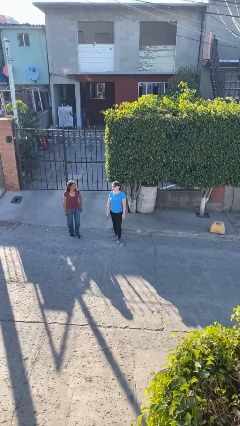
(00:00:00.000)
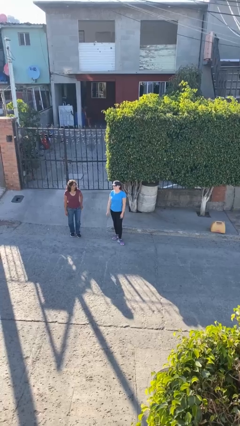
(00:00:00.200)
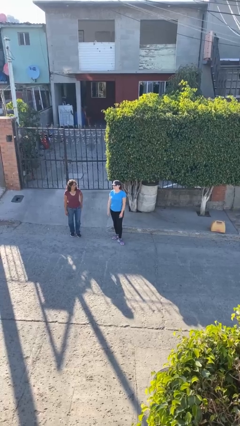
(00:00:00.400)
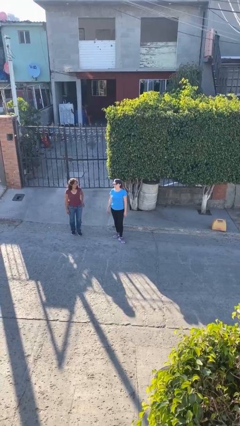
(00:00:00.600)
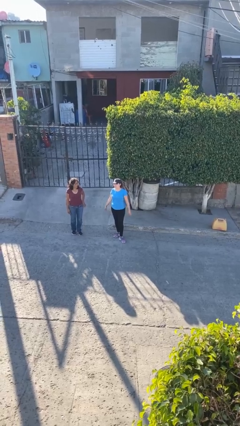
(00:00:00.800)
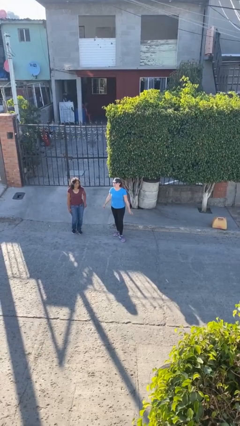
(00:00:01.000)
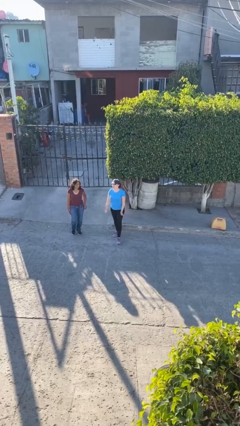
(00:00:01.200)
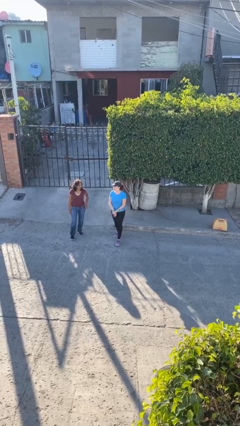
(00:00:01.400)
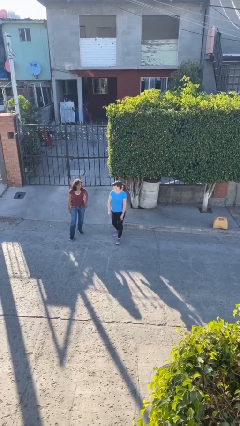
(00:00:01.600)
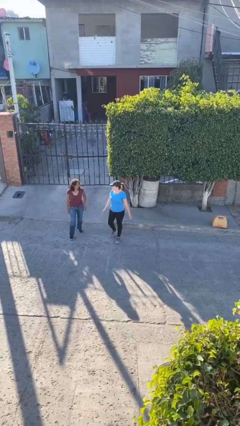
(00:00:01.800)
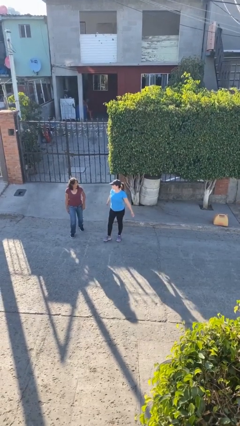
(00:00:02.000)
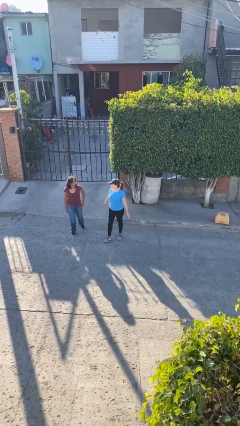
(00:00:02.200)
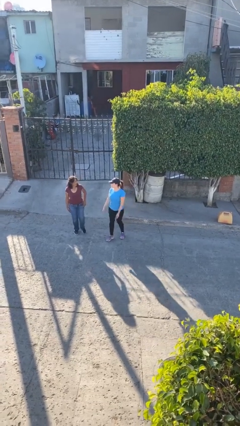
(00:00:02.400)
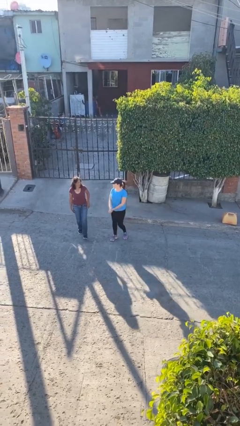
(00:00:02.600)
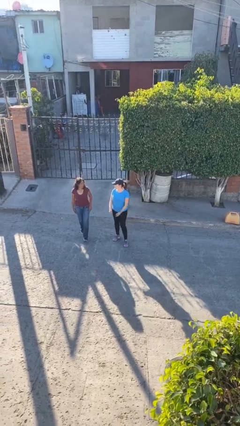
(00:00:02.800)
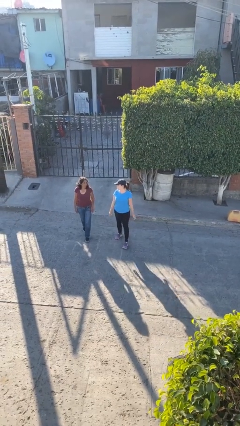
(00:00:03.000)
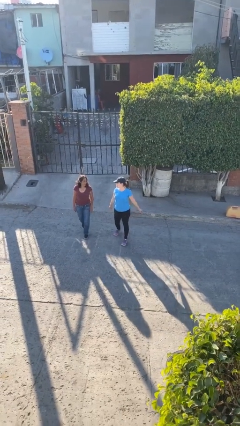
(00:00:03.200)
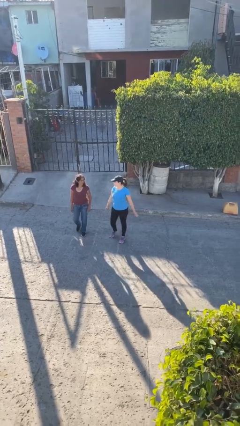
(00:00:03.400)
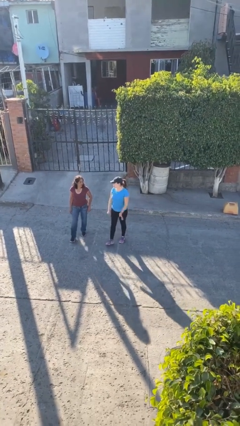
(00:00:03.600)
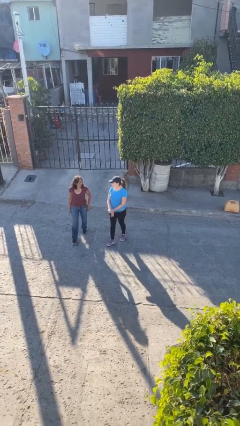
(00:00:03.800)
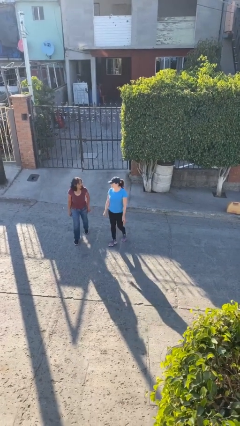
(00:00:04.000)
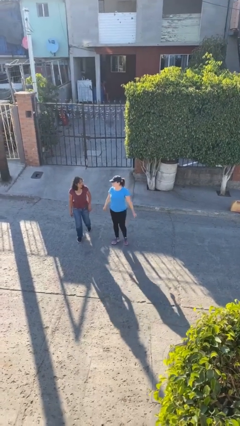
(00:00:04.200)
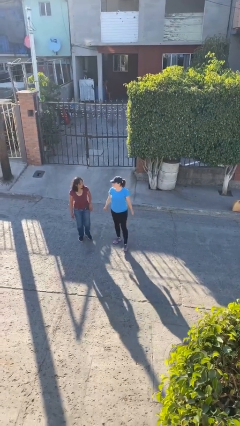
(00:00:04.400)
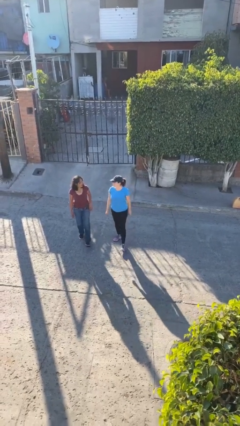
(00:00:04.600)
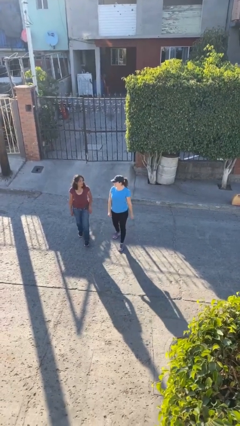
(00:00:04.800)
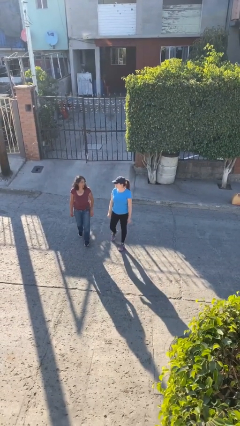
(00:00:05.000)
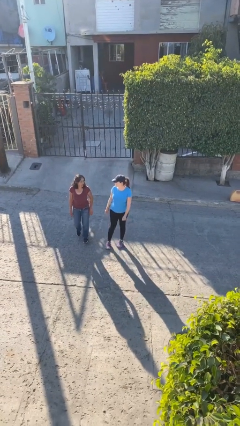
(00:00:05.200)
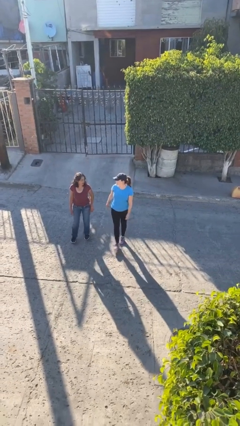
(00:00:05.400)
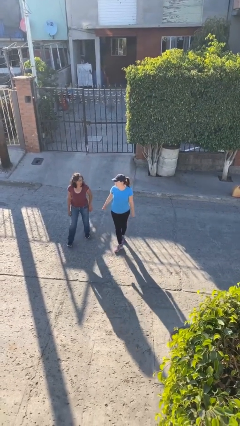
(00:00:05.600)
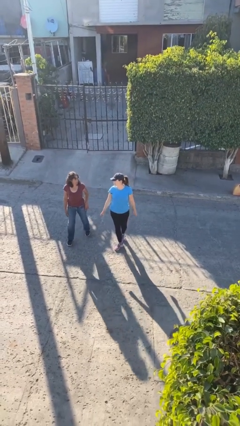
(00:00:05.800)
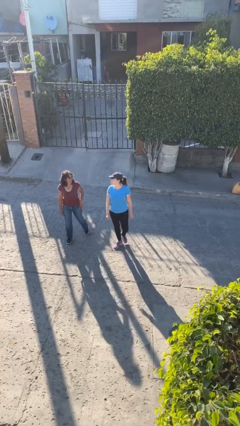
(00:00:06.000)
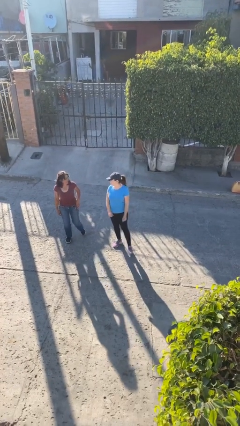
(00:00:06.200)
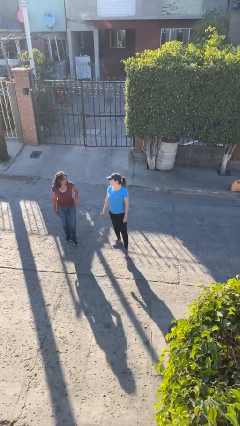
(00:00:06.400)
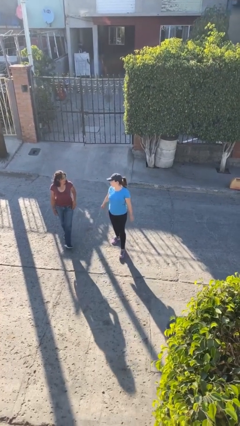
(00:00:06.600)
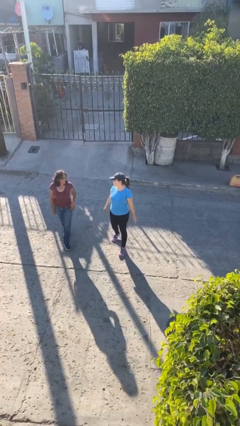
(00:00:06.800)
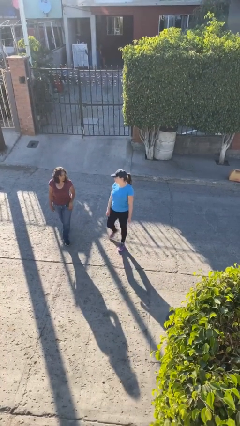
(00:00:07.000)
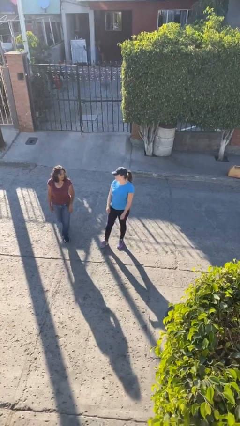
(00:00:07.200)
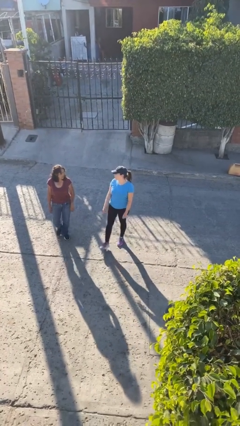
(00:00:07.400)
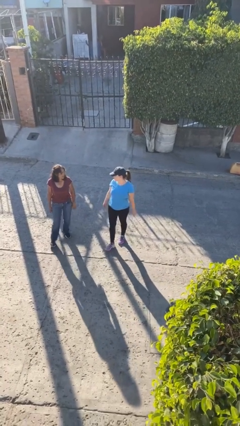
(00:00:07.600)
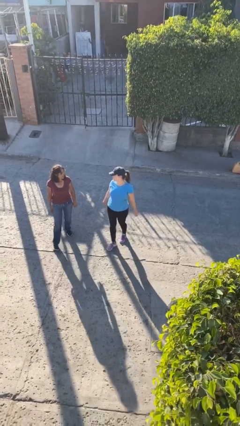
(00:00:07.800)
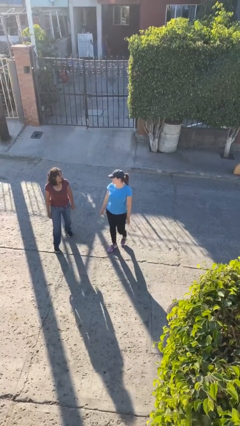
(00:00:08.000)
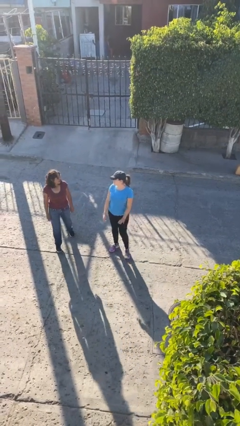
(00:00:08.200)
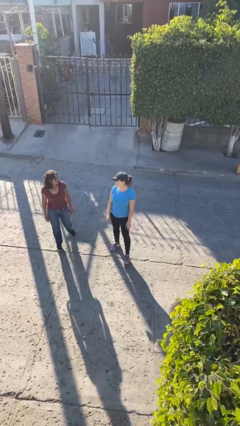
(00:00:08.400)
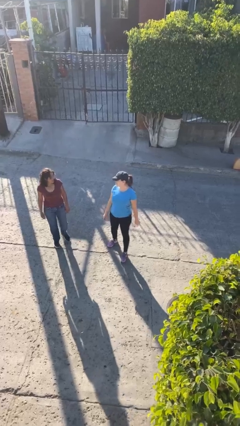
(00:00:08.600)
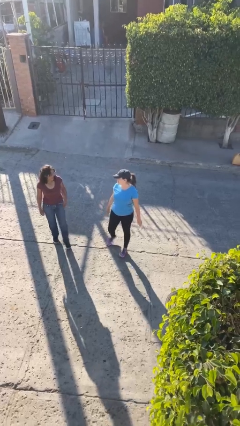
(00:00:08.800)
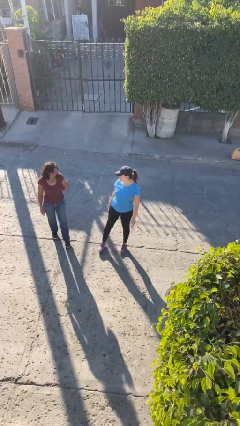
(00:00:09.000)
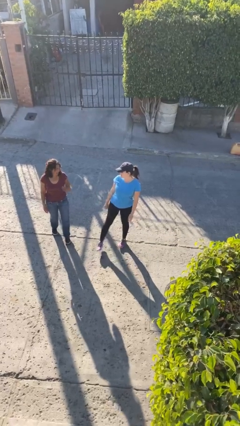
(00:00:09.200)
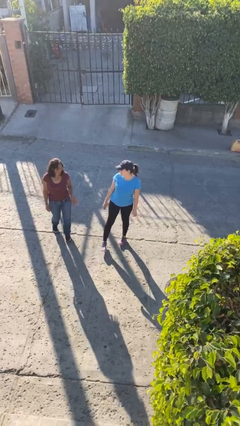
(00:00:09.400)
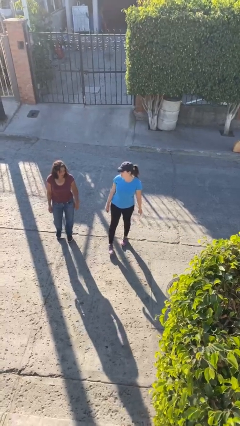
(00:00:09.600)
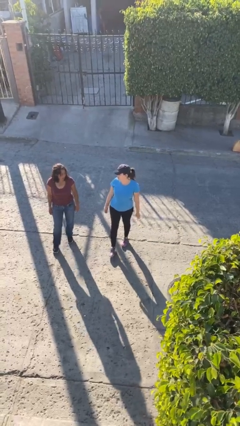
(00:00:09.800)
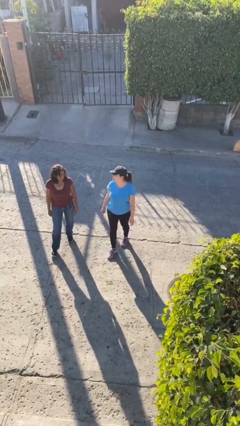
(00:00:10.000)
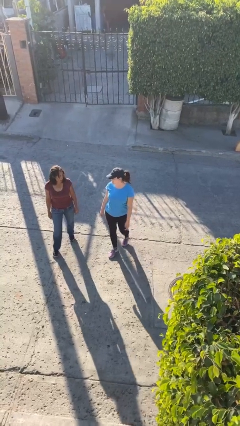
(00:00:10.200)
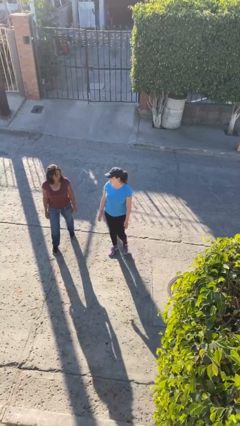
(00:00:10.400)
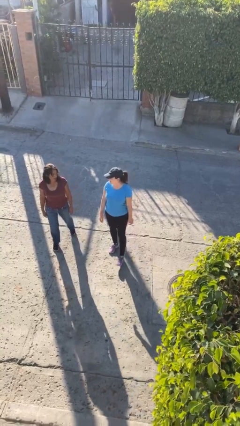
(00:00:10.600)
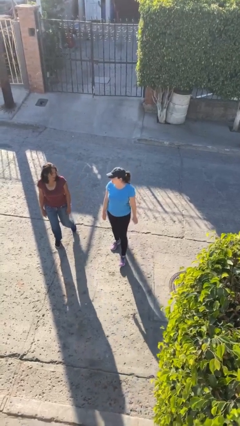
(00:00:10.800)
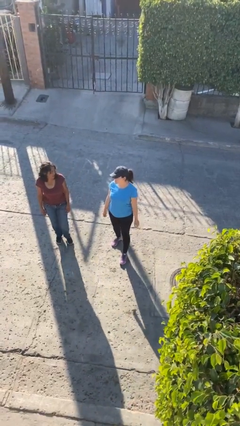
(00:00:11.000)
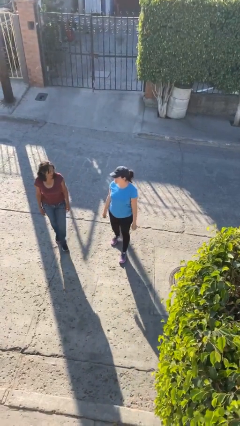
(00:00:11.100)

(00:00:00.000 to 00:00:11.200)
person talks to person

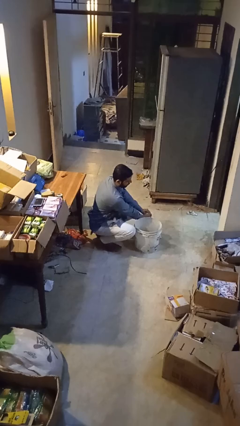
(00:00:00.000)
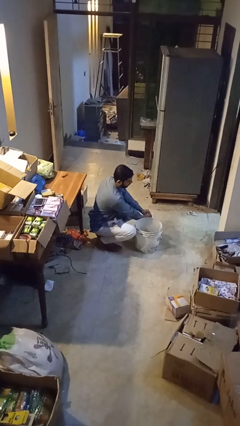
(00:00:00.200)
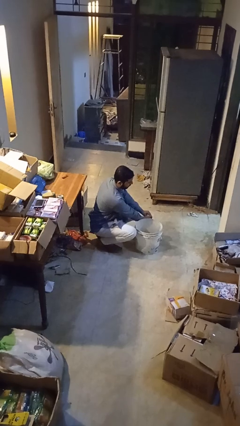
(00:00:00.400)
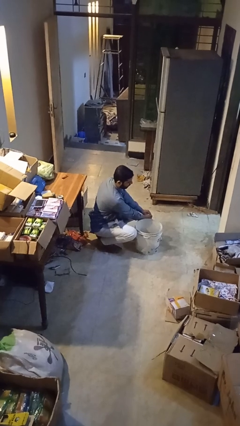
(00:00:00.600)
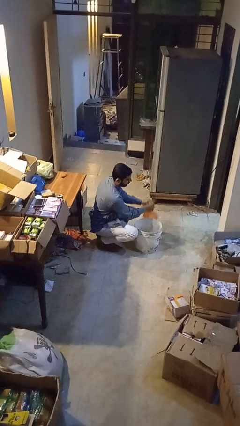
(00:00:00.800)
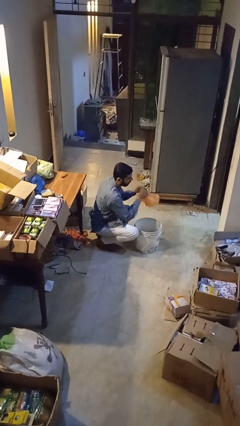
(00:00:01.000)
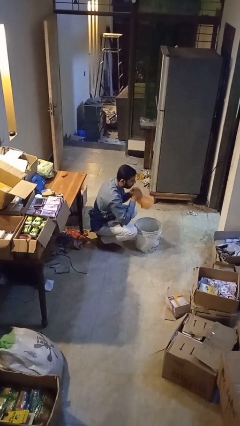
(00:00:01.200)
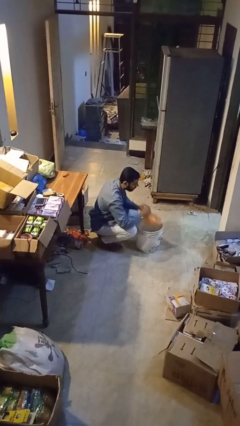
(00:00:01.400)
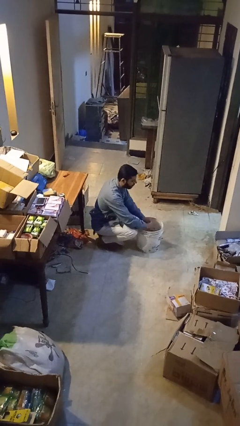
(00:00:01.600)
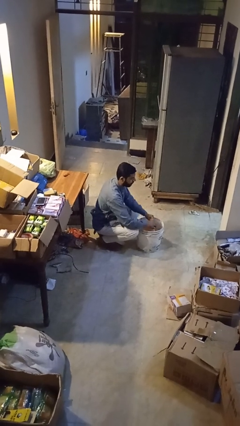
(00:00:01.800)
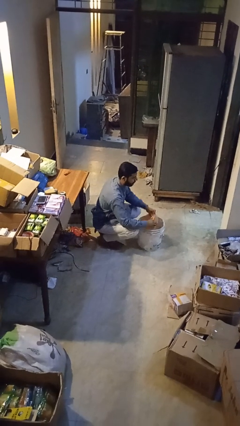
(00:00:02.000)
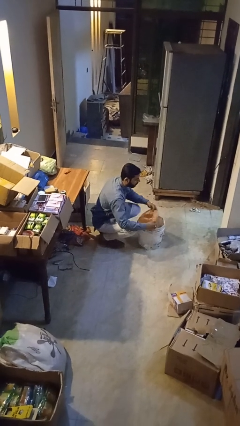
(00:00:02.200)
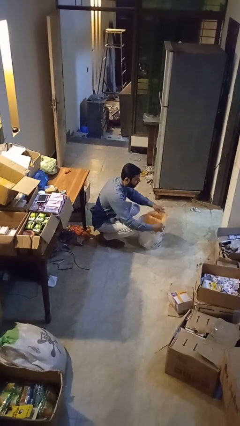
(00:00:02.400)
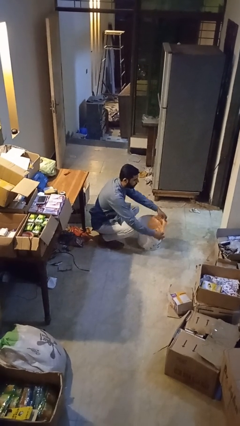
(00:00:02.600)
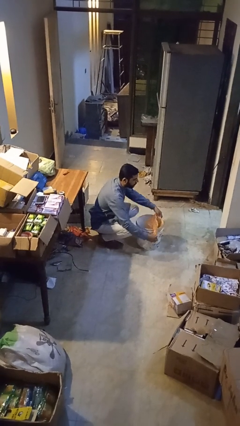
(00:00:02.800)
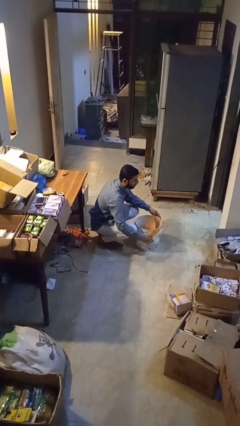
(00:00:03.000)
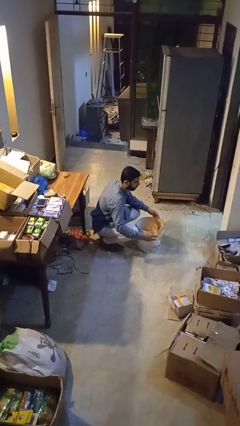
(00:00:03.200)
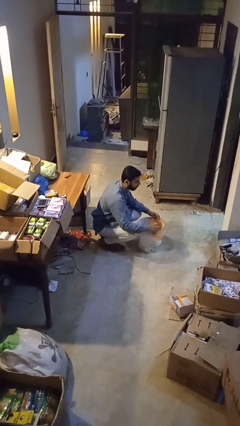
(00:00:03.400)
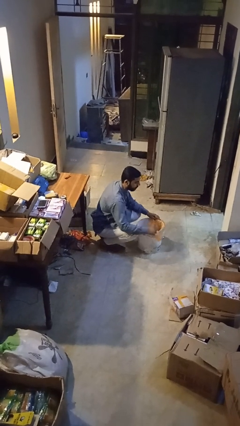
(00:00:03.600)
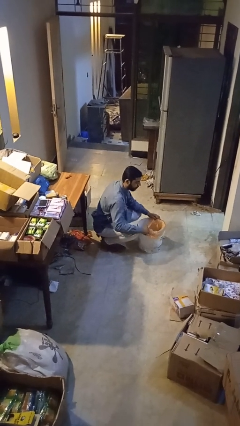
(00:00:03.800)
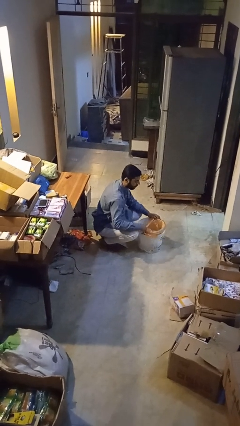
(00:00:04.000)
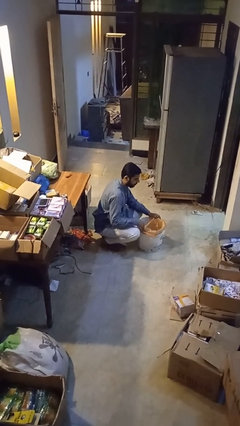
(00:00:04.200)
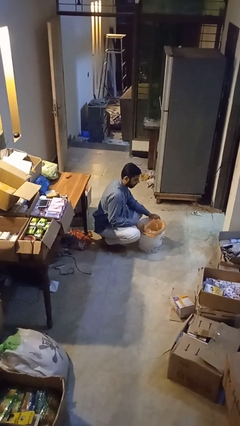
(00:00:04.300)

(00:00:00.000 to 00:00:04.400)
person inserts trashbag into trashcan

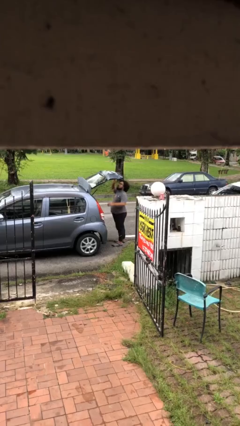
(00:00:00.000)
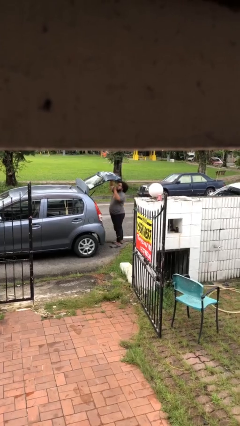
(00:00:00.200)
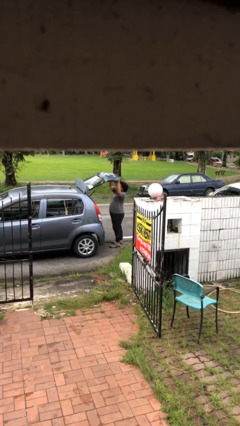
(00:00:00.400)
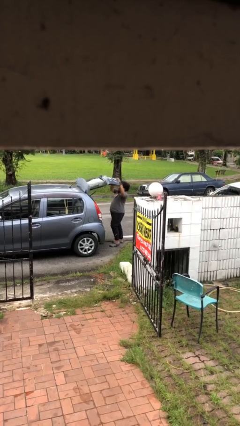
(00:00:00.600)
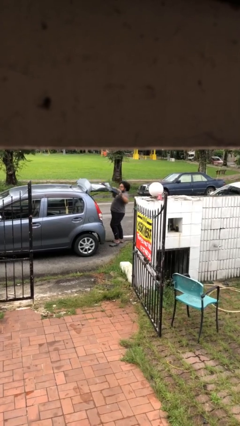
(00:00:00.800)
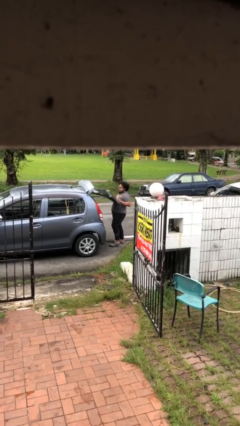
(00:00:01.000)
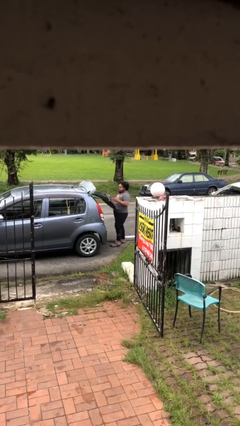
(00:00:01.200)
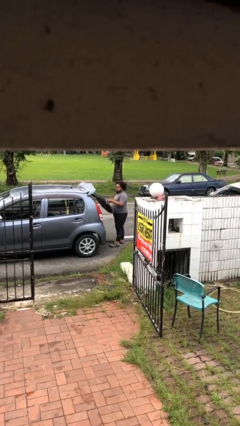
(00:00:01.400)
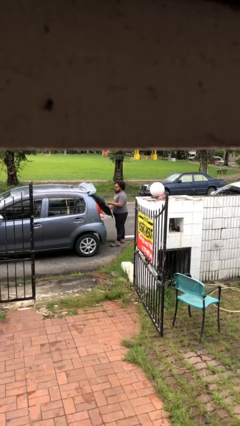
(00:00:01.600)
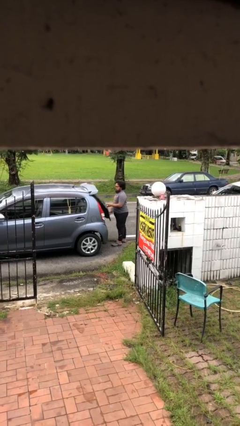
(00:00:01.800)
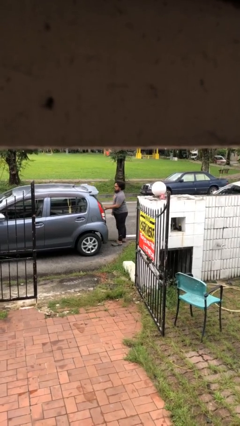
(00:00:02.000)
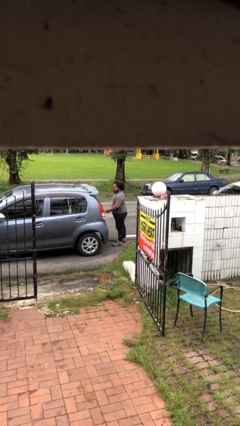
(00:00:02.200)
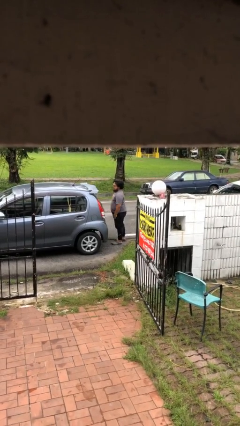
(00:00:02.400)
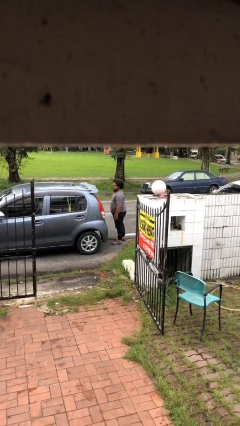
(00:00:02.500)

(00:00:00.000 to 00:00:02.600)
person closes car trunk
